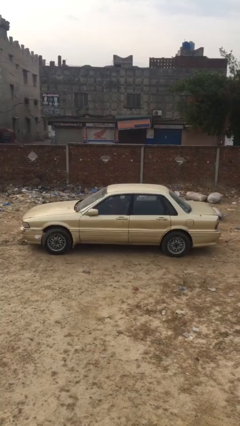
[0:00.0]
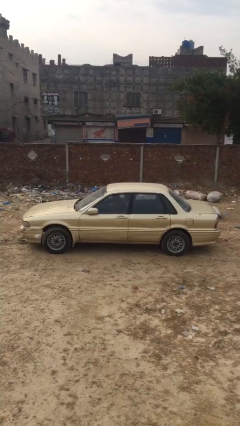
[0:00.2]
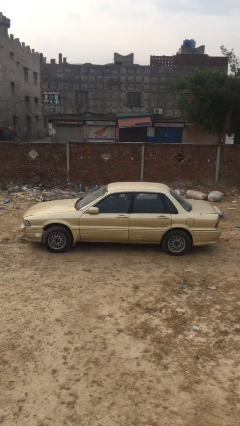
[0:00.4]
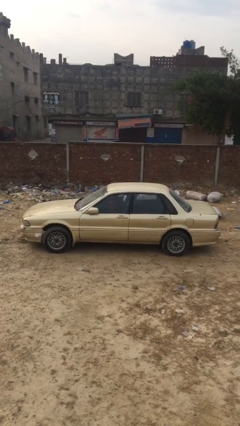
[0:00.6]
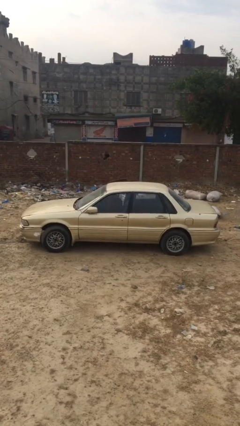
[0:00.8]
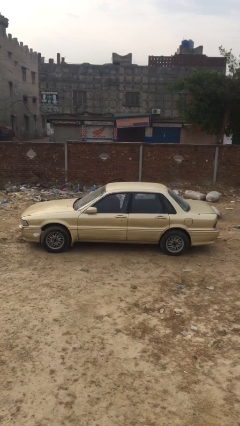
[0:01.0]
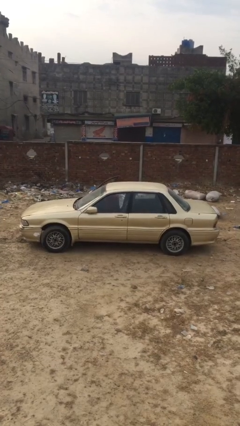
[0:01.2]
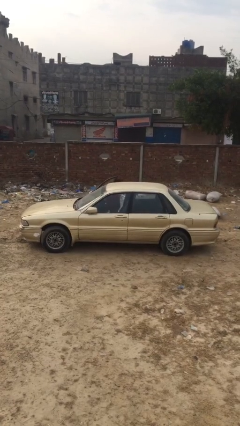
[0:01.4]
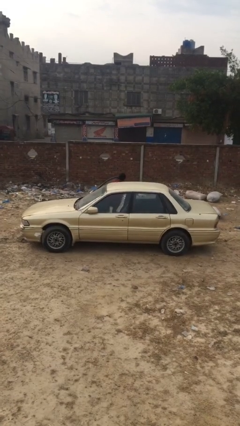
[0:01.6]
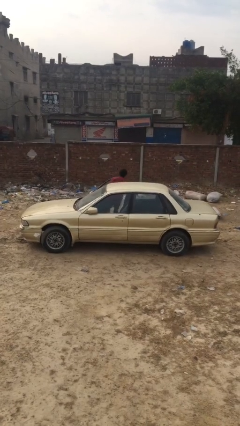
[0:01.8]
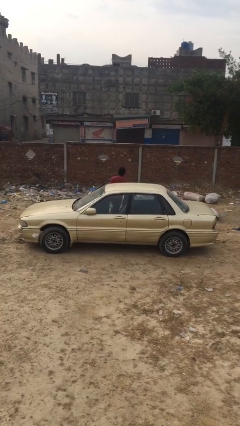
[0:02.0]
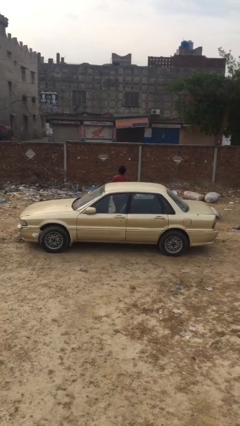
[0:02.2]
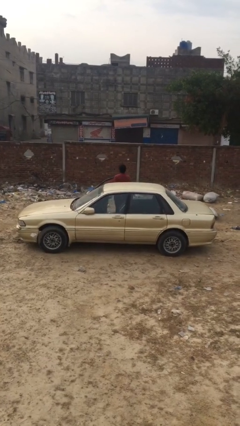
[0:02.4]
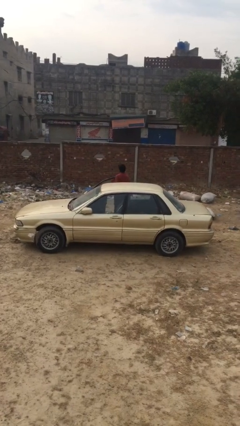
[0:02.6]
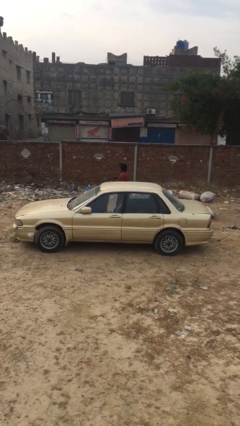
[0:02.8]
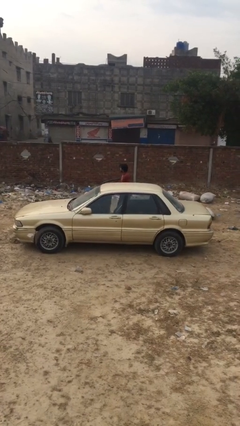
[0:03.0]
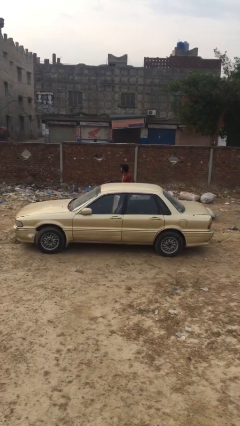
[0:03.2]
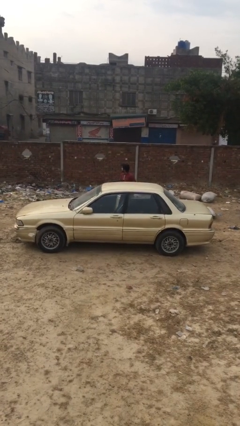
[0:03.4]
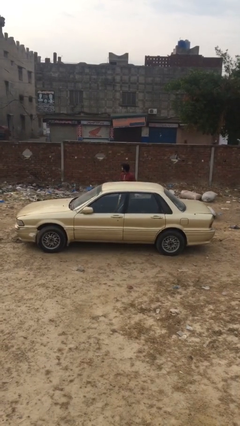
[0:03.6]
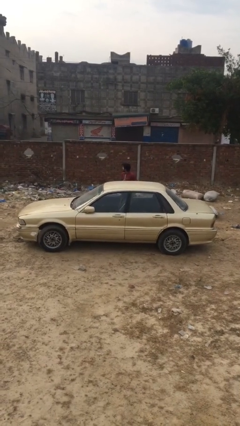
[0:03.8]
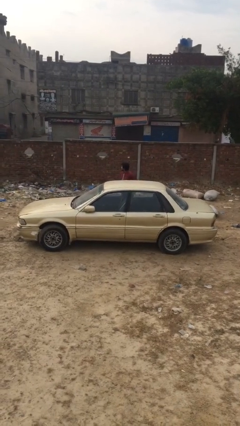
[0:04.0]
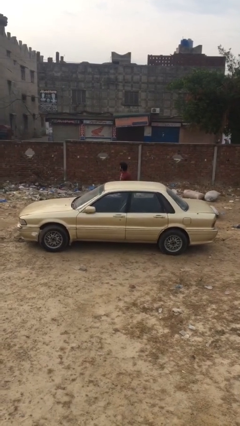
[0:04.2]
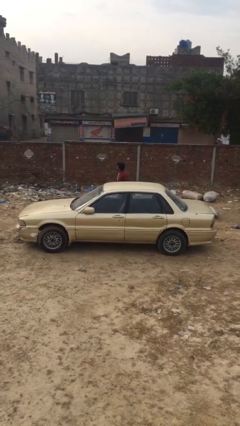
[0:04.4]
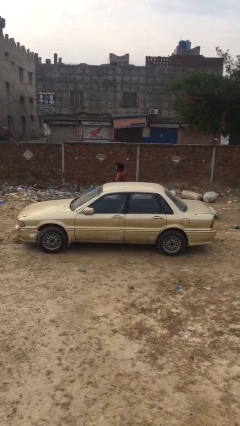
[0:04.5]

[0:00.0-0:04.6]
car drops off person

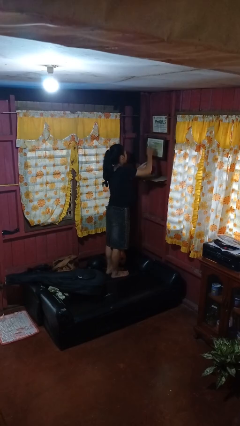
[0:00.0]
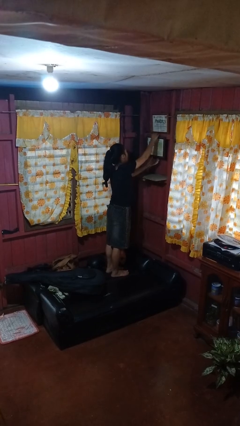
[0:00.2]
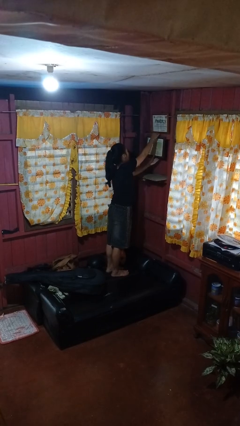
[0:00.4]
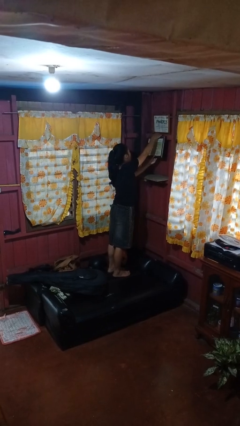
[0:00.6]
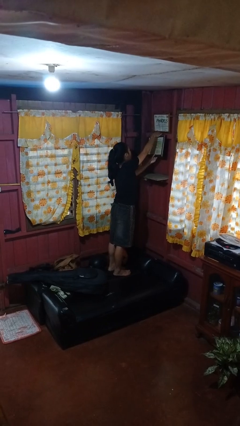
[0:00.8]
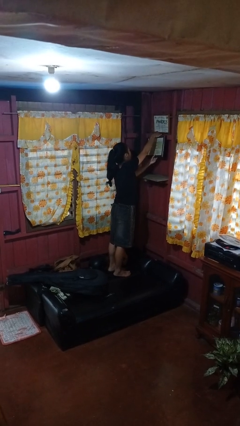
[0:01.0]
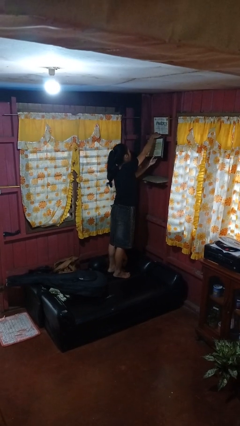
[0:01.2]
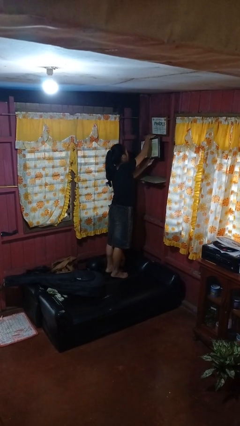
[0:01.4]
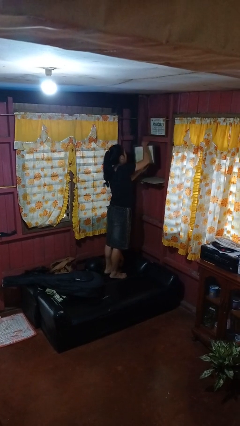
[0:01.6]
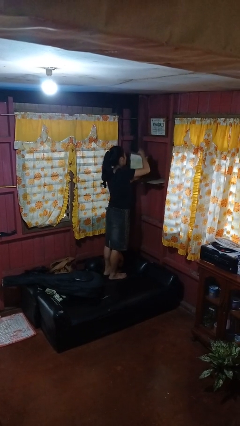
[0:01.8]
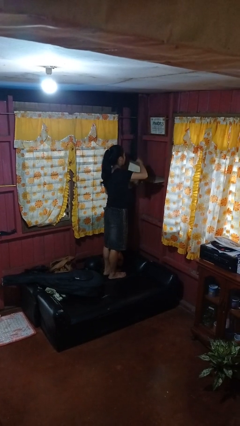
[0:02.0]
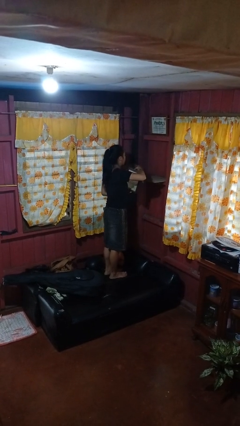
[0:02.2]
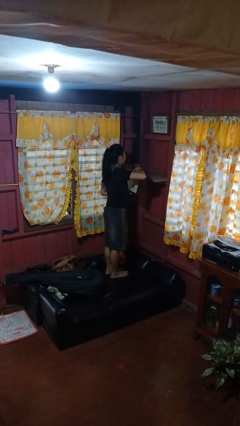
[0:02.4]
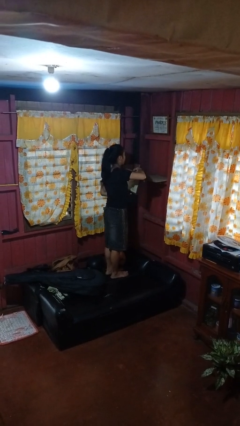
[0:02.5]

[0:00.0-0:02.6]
person takes down picture frame

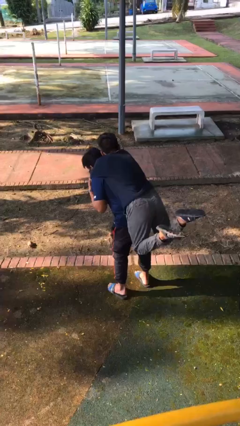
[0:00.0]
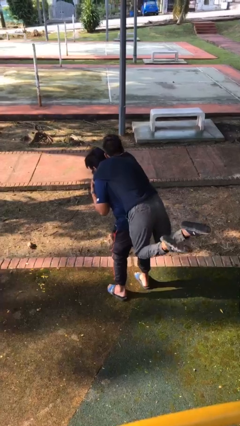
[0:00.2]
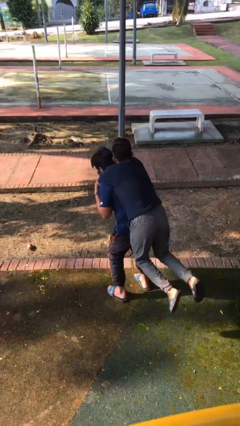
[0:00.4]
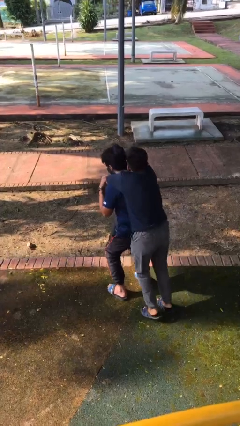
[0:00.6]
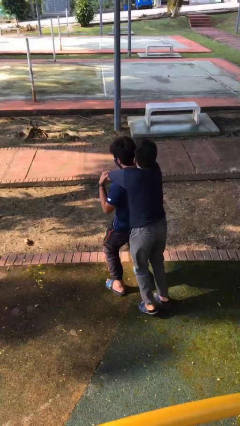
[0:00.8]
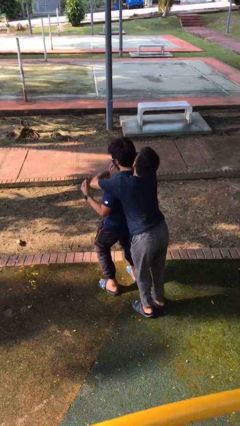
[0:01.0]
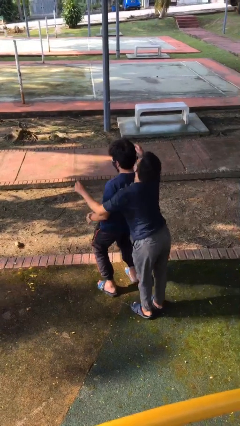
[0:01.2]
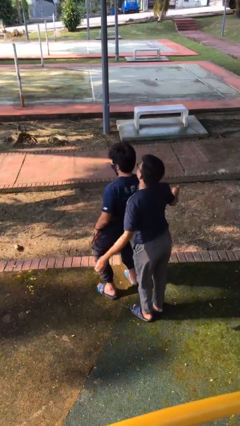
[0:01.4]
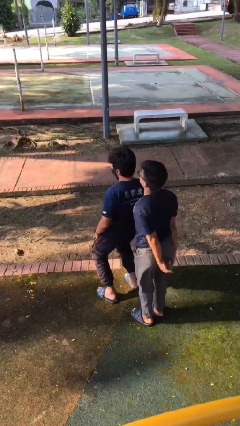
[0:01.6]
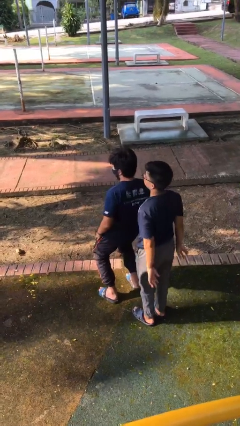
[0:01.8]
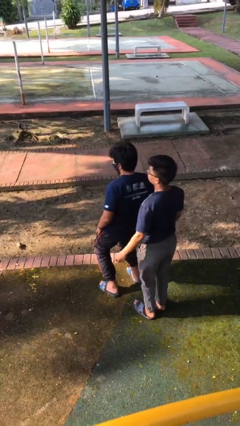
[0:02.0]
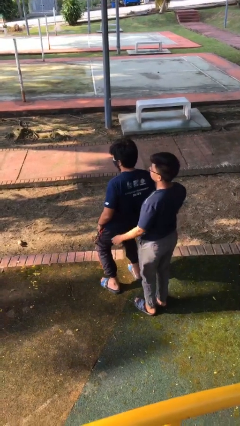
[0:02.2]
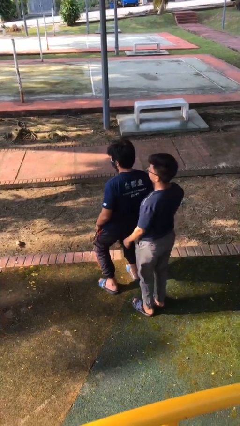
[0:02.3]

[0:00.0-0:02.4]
person puts down person

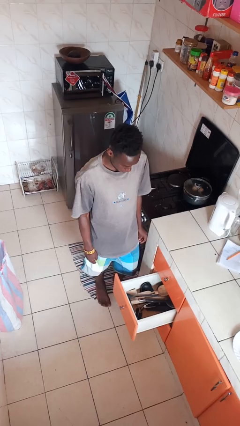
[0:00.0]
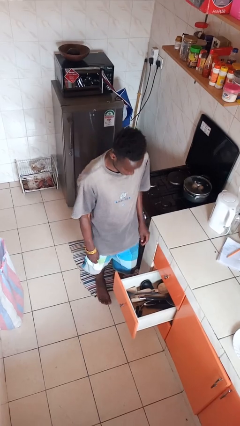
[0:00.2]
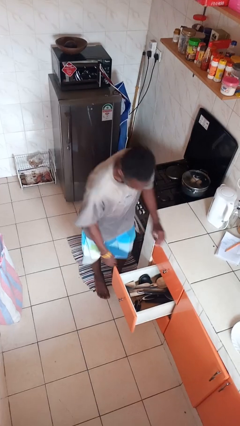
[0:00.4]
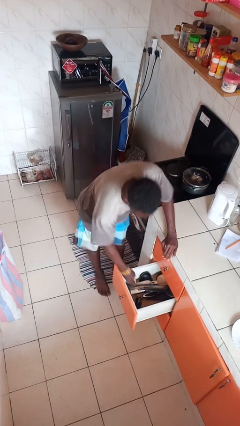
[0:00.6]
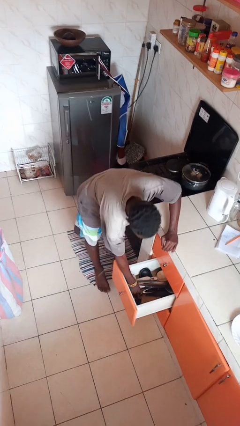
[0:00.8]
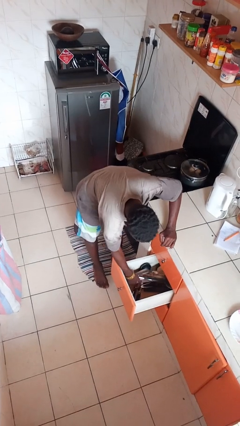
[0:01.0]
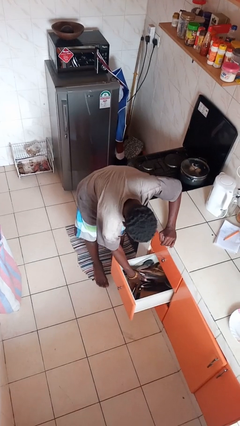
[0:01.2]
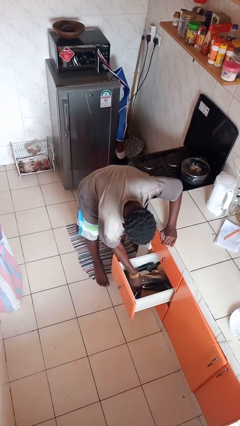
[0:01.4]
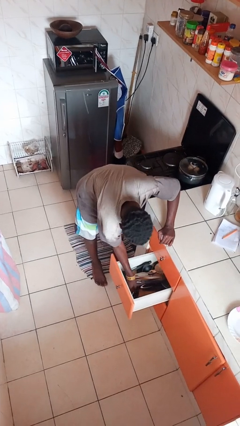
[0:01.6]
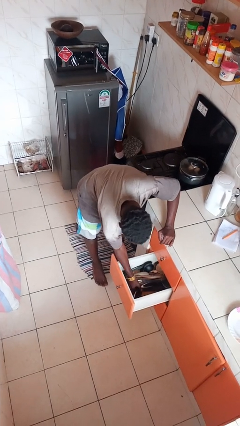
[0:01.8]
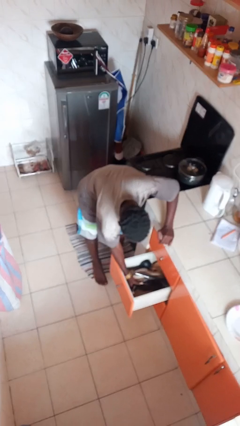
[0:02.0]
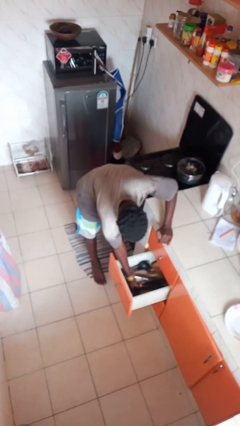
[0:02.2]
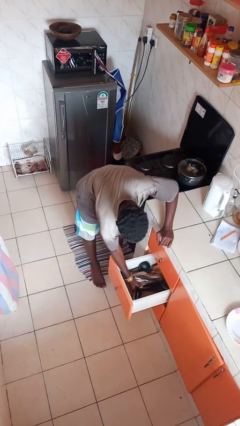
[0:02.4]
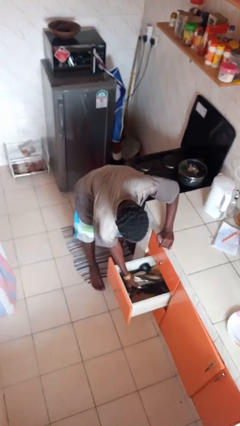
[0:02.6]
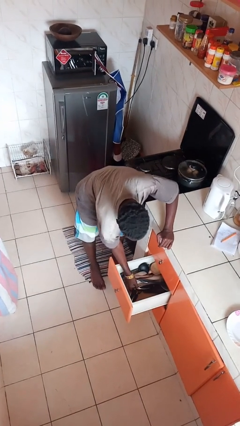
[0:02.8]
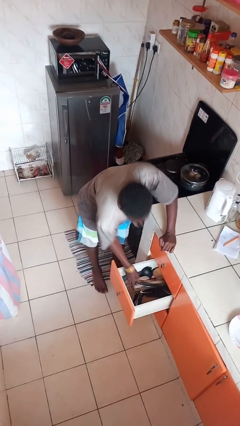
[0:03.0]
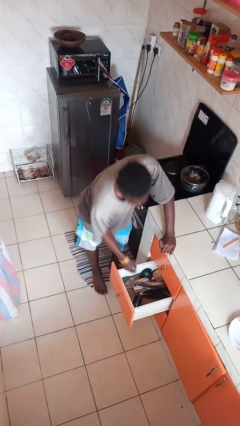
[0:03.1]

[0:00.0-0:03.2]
person searches in kitchen drawer

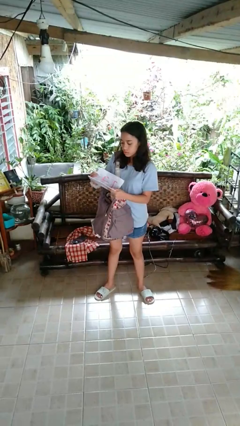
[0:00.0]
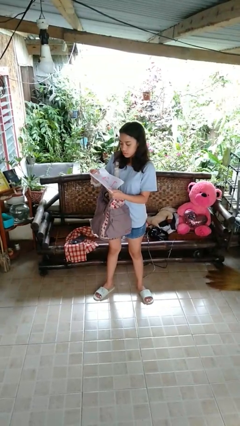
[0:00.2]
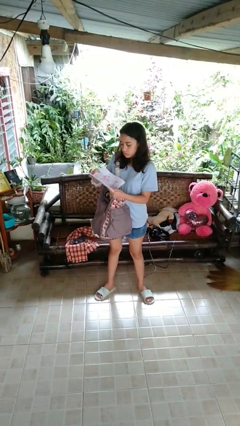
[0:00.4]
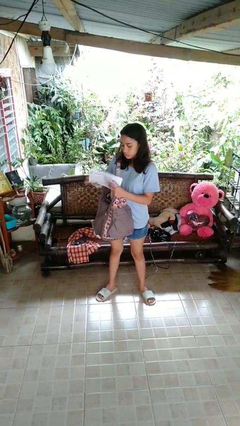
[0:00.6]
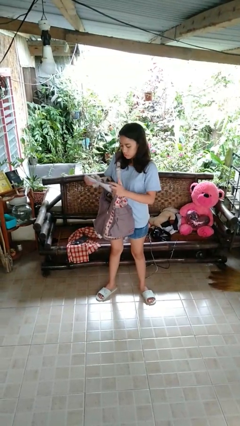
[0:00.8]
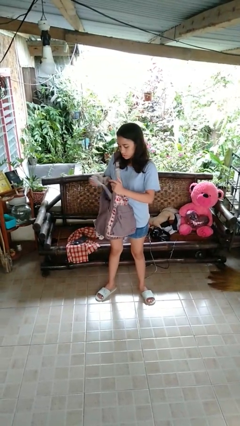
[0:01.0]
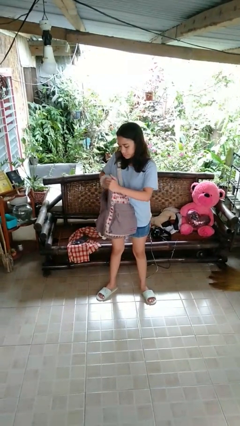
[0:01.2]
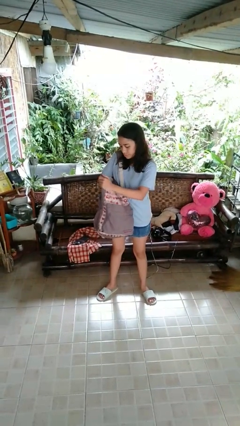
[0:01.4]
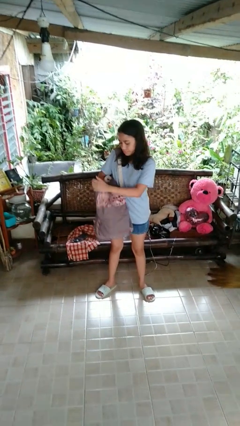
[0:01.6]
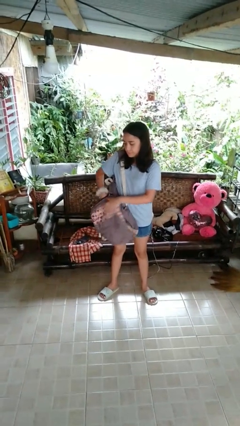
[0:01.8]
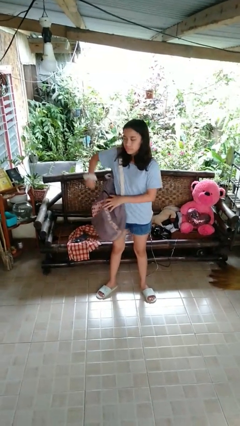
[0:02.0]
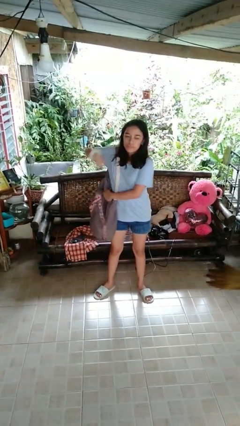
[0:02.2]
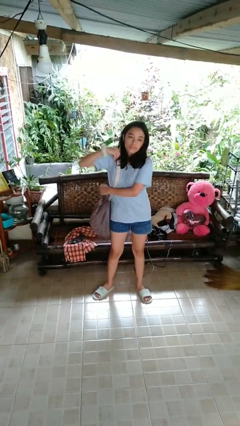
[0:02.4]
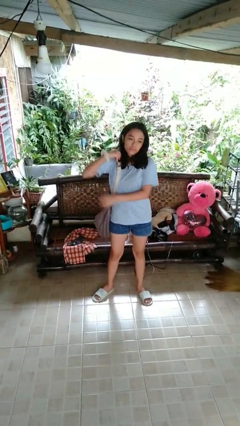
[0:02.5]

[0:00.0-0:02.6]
person puts object into backpack

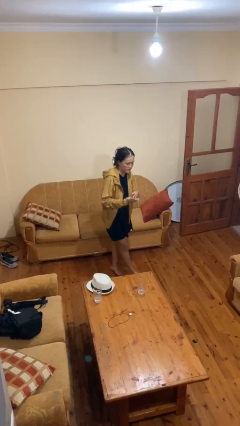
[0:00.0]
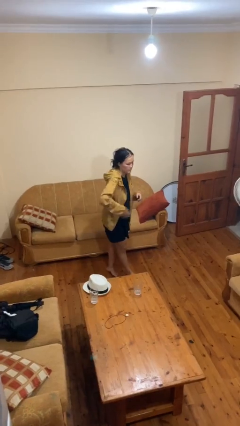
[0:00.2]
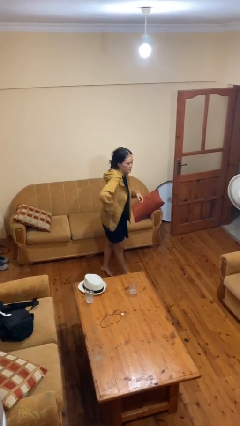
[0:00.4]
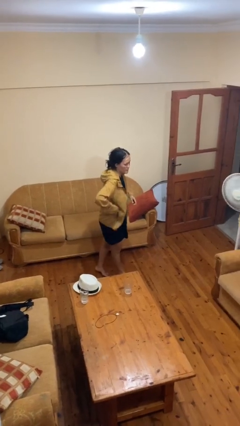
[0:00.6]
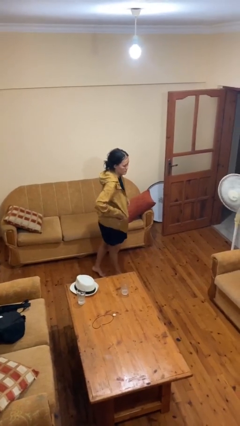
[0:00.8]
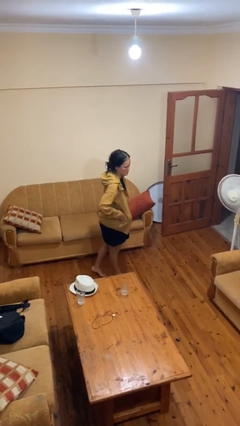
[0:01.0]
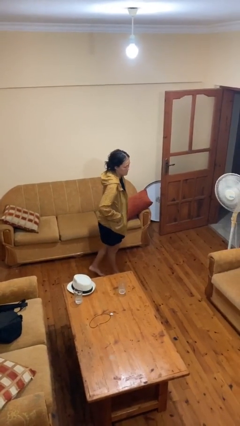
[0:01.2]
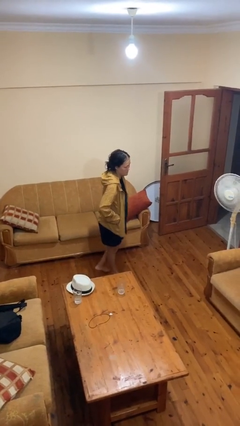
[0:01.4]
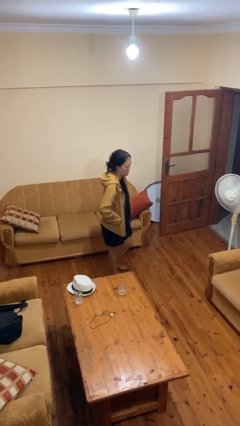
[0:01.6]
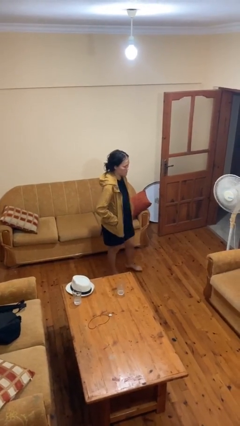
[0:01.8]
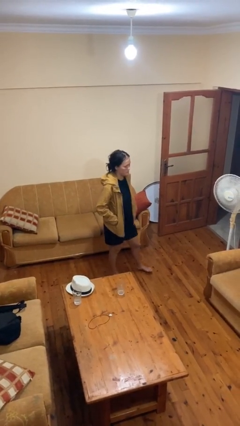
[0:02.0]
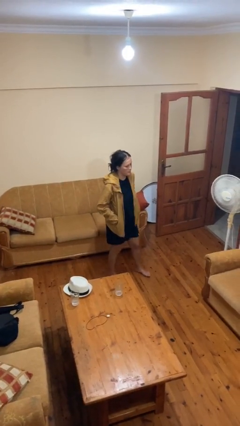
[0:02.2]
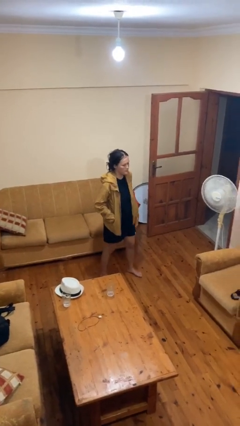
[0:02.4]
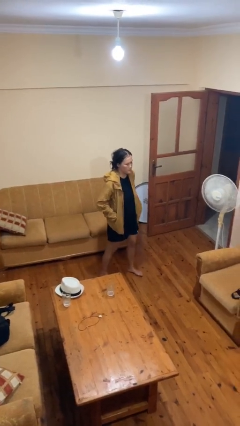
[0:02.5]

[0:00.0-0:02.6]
person puts phone into pocket
